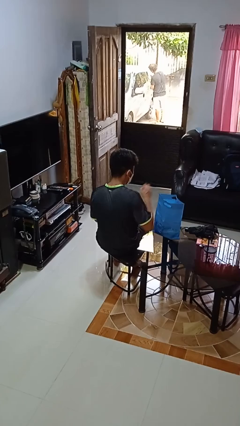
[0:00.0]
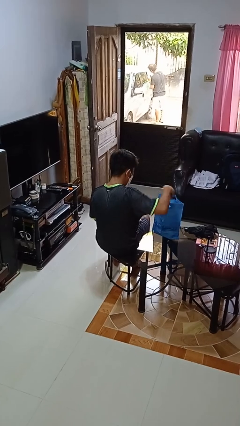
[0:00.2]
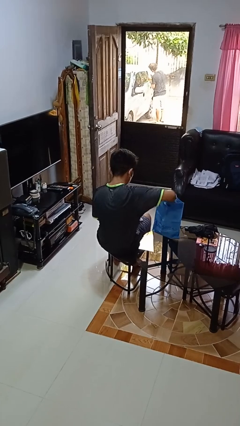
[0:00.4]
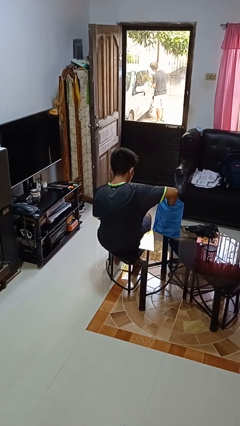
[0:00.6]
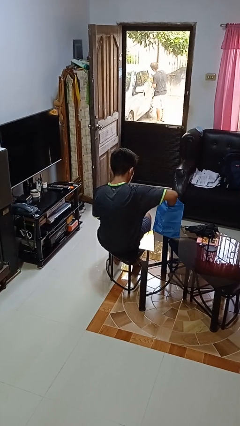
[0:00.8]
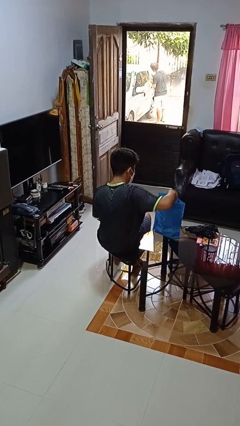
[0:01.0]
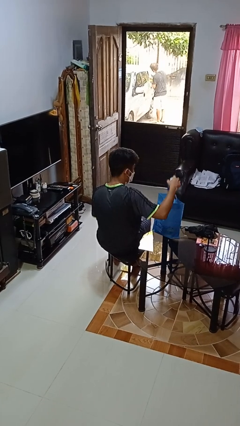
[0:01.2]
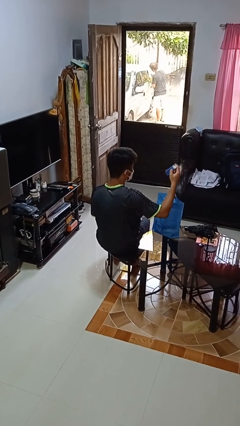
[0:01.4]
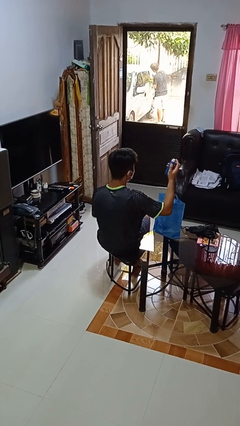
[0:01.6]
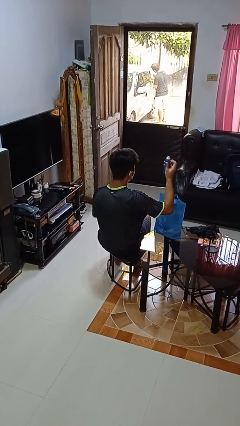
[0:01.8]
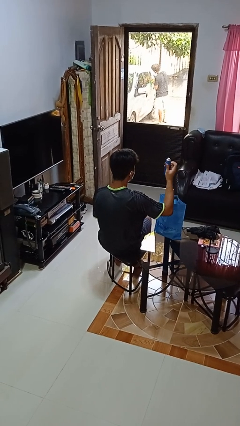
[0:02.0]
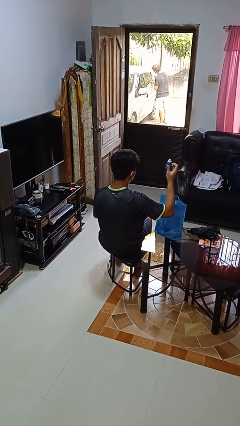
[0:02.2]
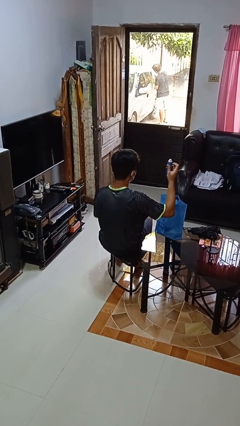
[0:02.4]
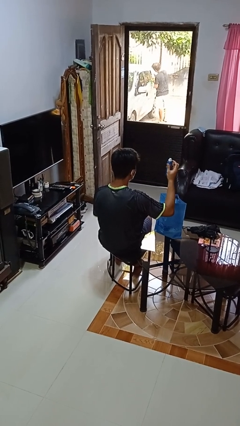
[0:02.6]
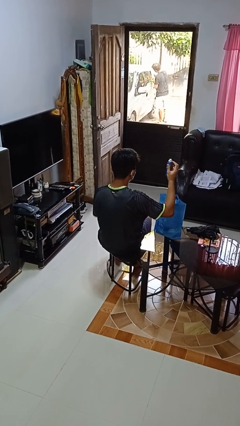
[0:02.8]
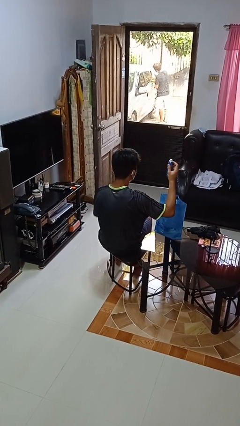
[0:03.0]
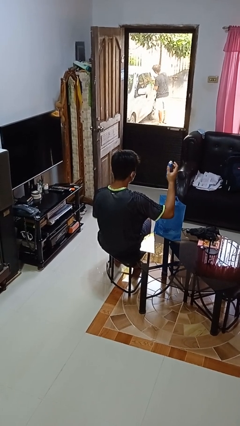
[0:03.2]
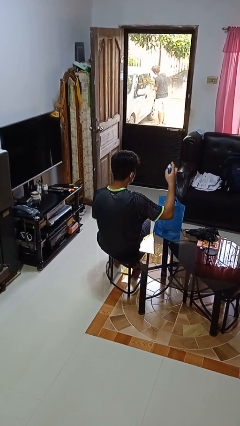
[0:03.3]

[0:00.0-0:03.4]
person takes object from bag

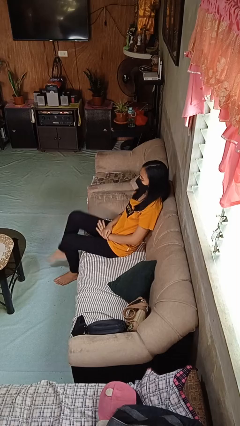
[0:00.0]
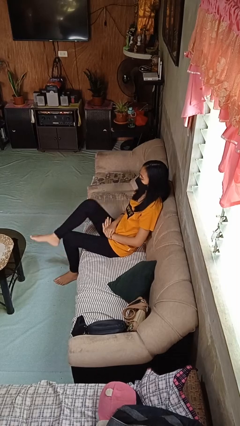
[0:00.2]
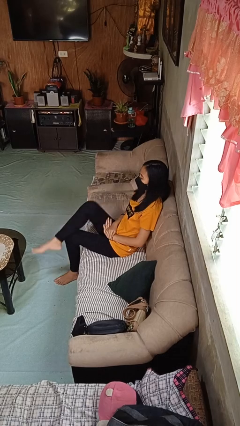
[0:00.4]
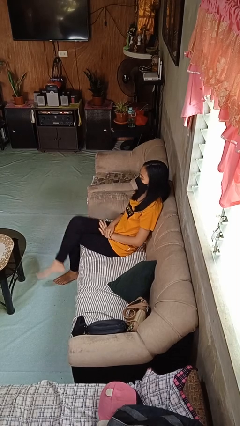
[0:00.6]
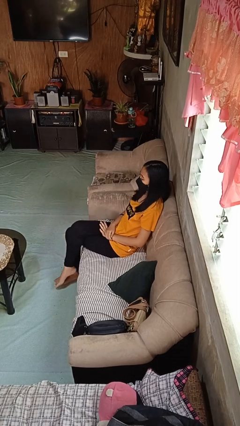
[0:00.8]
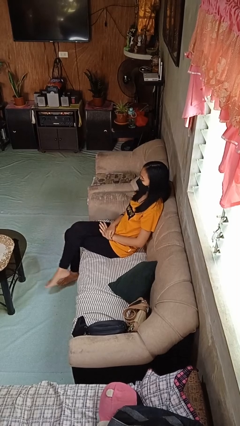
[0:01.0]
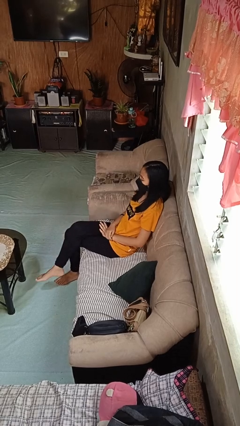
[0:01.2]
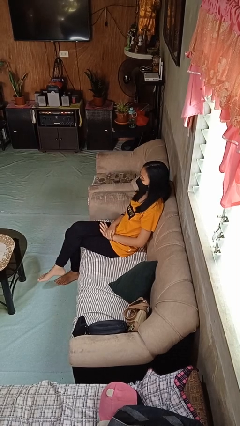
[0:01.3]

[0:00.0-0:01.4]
person crosses legs

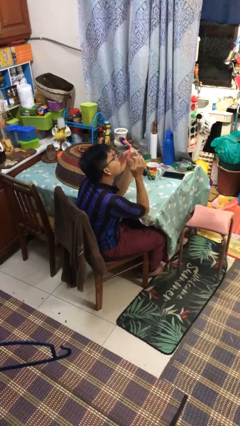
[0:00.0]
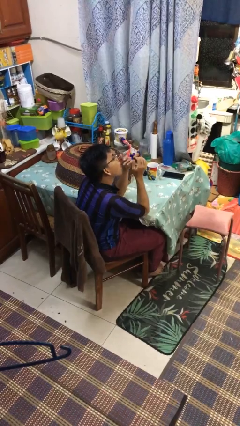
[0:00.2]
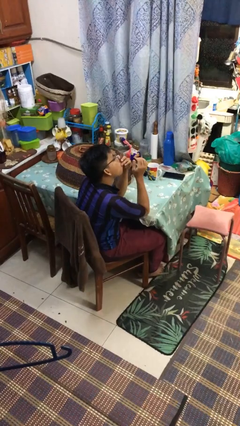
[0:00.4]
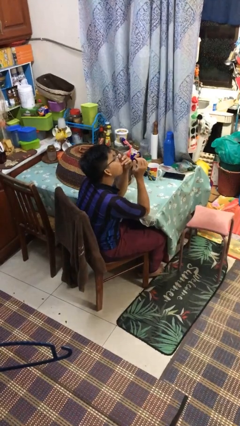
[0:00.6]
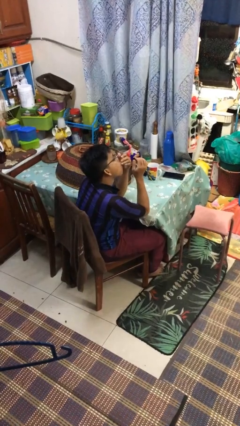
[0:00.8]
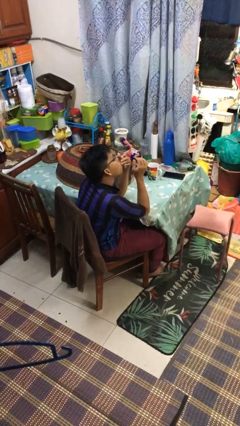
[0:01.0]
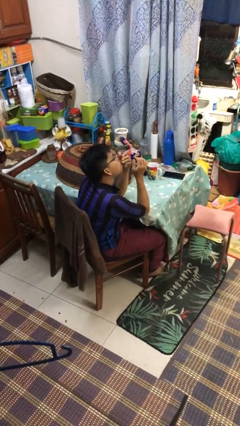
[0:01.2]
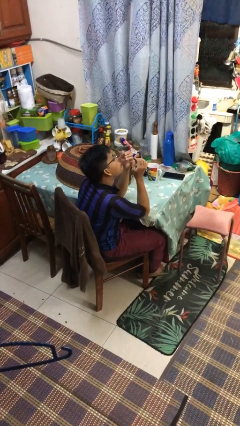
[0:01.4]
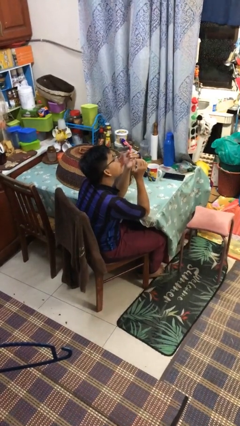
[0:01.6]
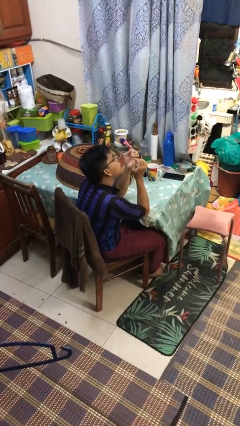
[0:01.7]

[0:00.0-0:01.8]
person licks fingers

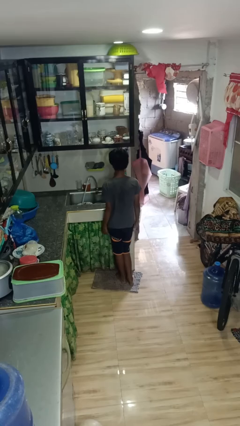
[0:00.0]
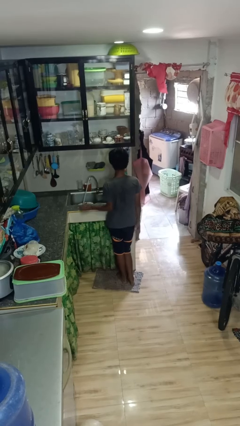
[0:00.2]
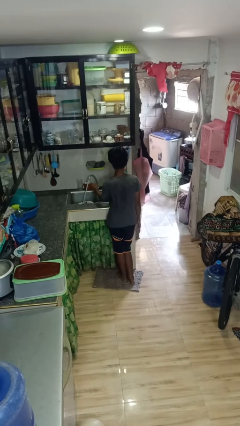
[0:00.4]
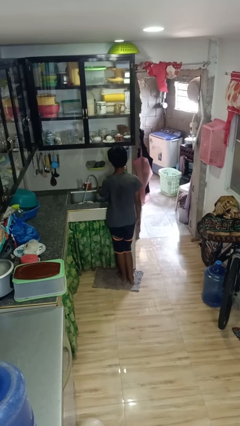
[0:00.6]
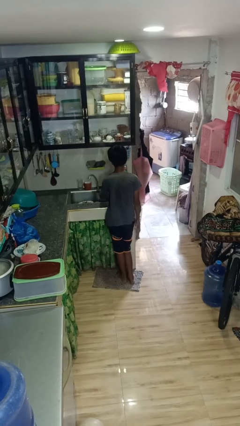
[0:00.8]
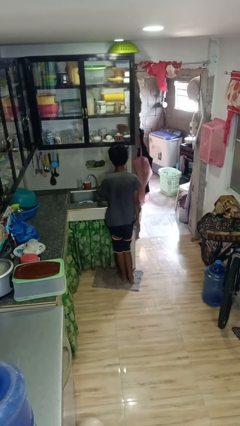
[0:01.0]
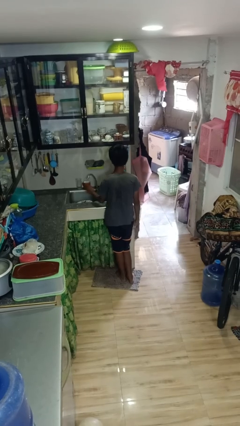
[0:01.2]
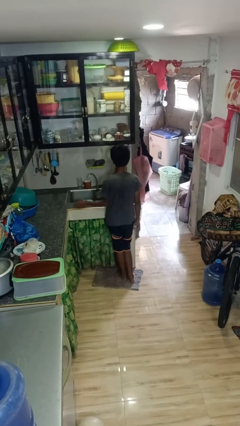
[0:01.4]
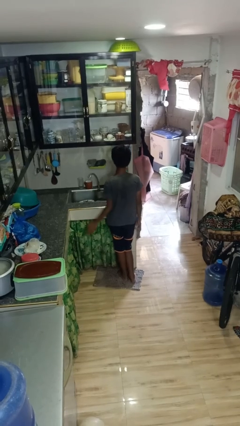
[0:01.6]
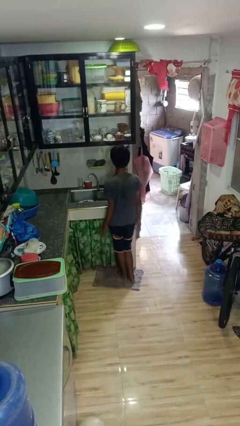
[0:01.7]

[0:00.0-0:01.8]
person turns off faucet

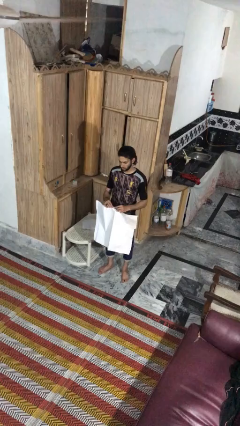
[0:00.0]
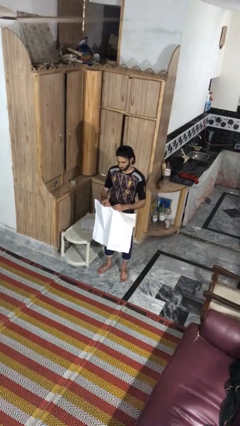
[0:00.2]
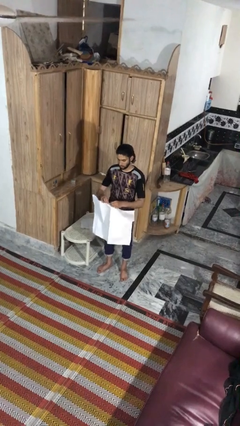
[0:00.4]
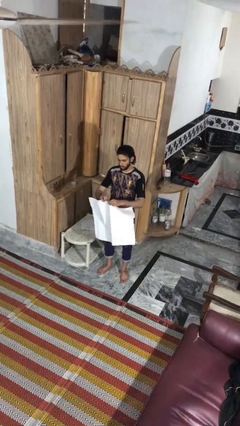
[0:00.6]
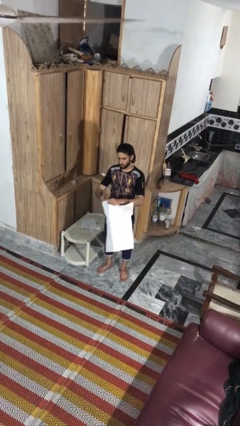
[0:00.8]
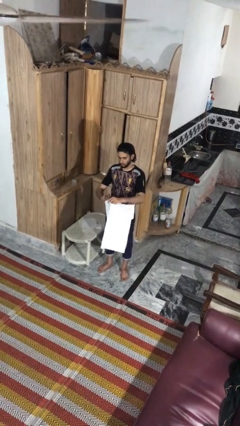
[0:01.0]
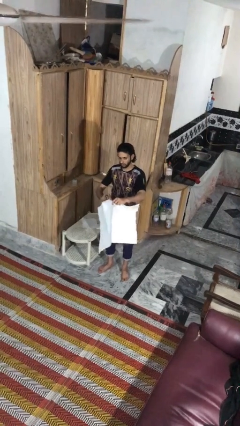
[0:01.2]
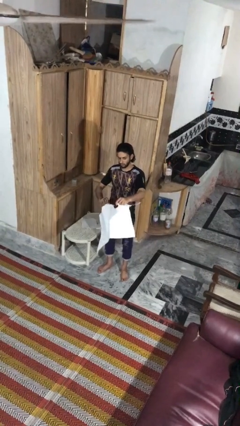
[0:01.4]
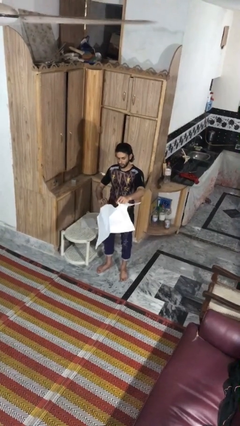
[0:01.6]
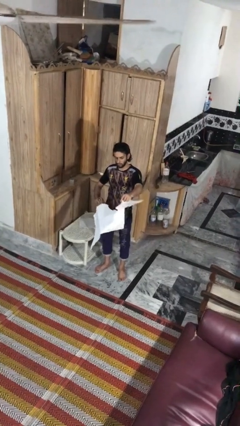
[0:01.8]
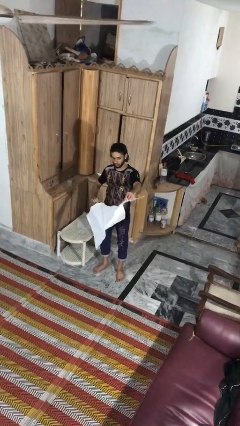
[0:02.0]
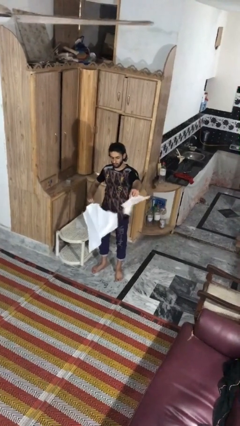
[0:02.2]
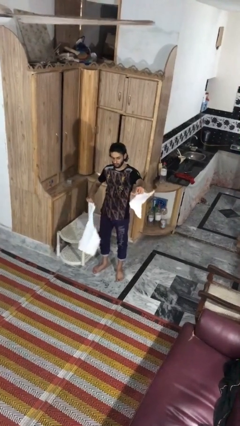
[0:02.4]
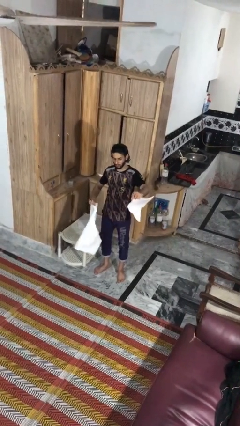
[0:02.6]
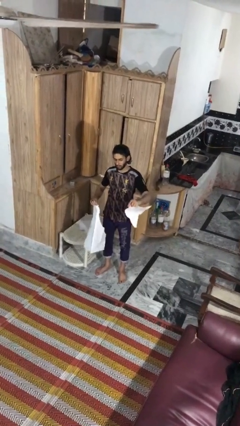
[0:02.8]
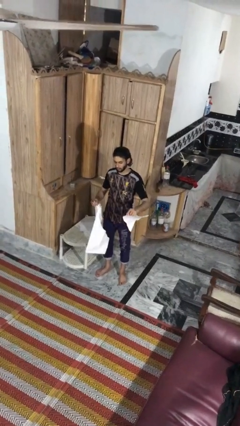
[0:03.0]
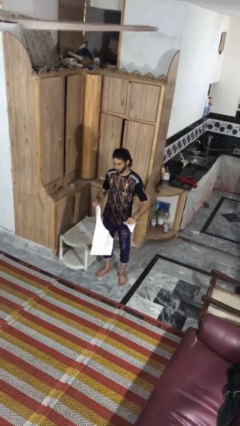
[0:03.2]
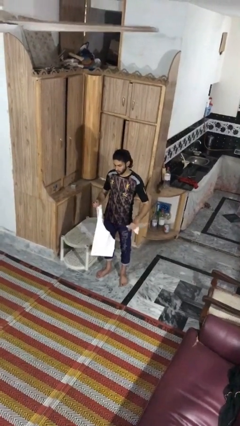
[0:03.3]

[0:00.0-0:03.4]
person tears paper

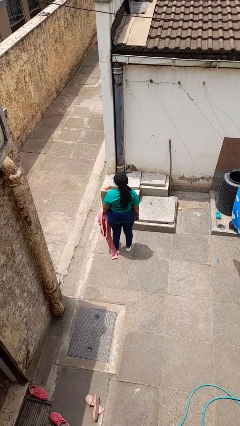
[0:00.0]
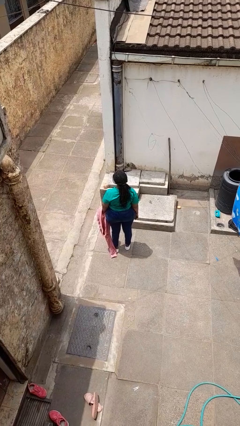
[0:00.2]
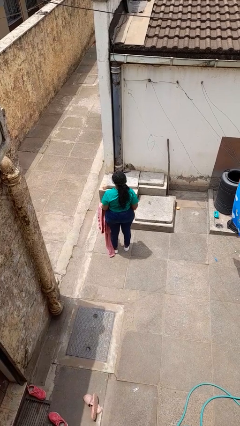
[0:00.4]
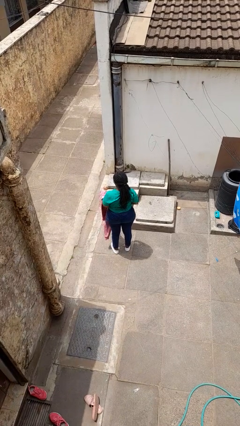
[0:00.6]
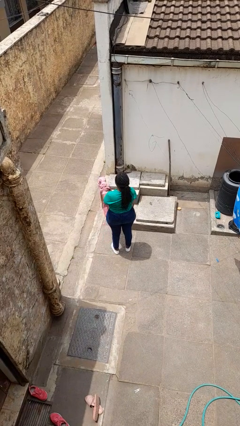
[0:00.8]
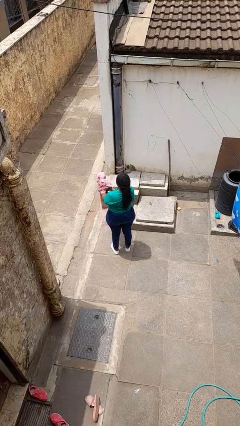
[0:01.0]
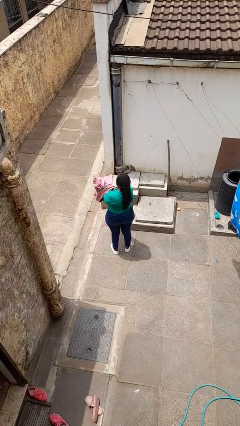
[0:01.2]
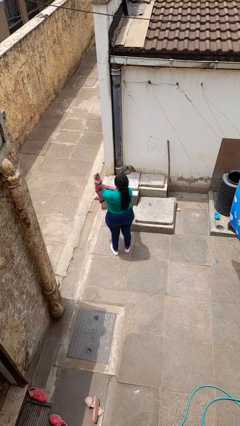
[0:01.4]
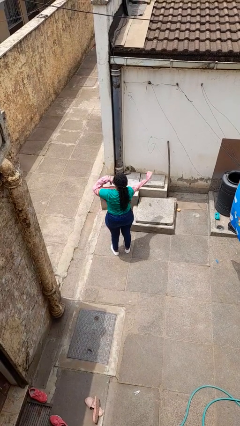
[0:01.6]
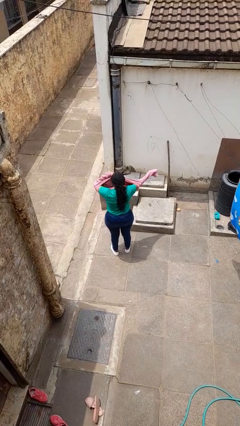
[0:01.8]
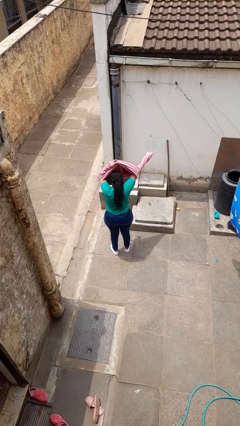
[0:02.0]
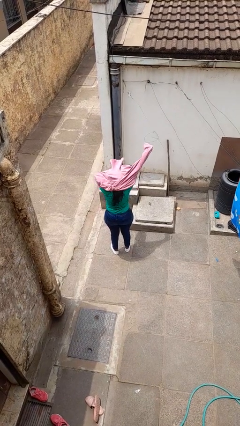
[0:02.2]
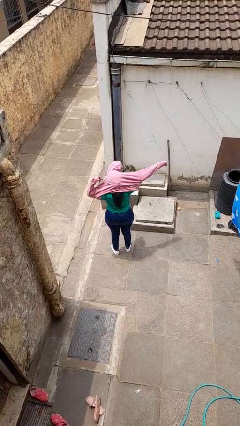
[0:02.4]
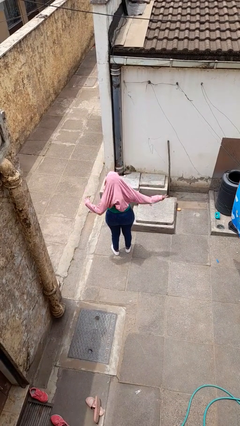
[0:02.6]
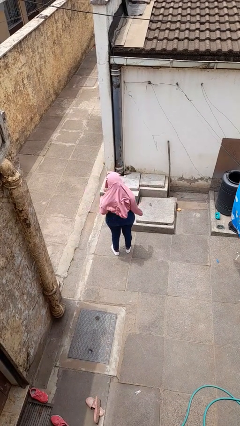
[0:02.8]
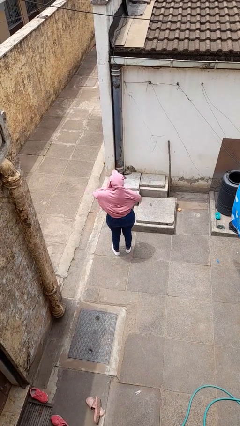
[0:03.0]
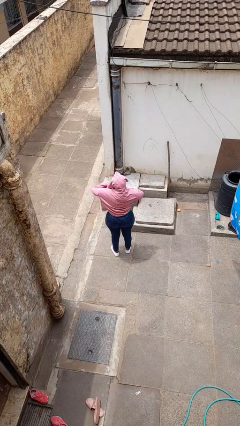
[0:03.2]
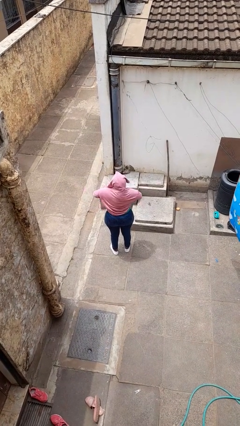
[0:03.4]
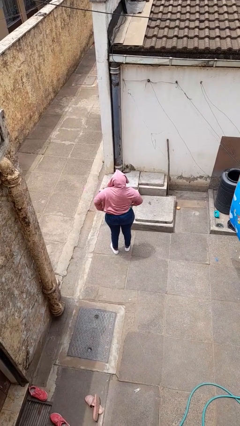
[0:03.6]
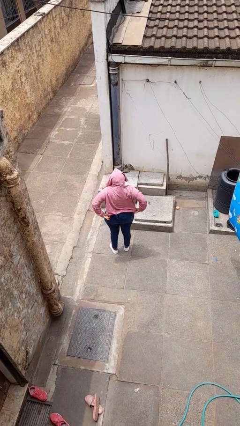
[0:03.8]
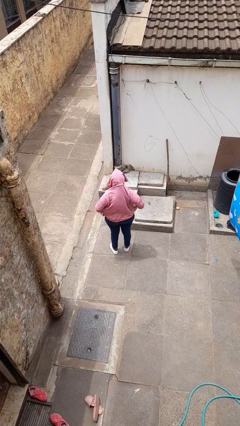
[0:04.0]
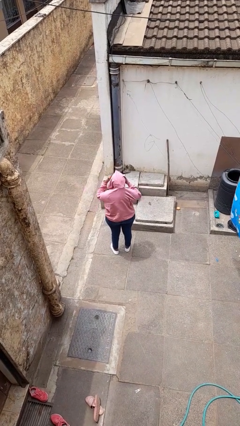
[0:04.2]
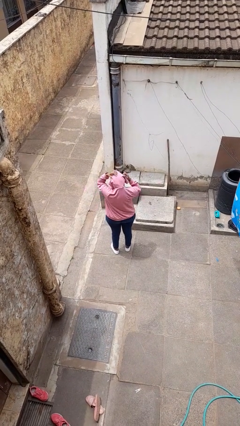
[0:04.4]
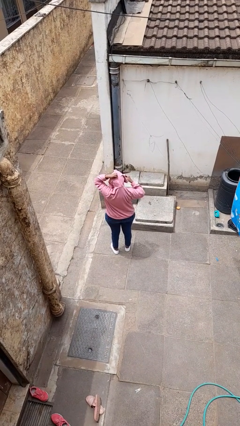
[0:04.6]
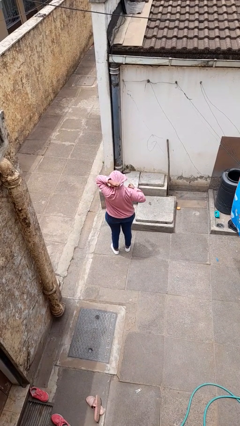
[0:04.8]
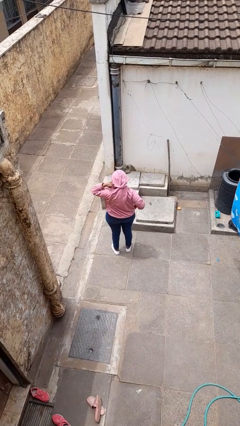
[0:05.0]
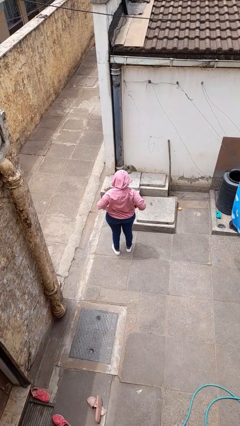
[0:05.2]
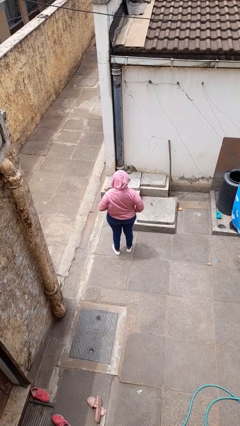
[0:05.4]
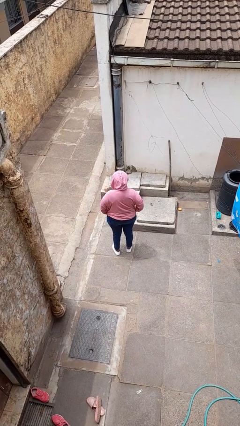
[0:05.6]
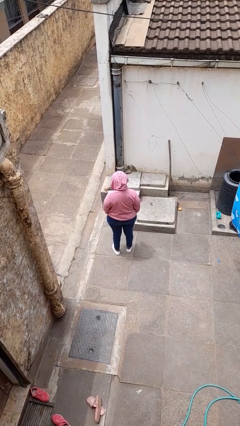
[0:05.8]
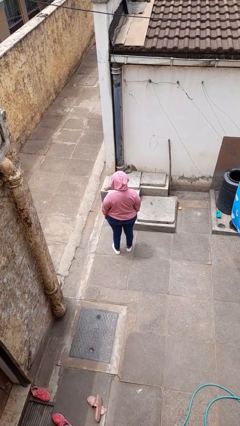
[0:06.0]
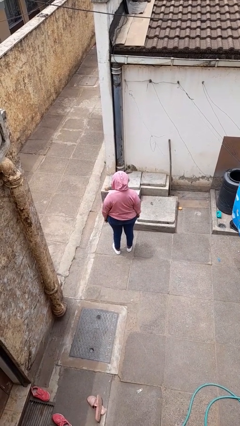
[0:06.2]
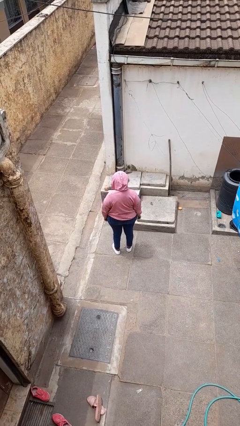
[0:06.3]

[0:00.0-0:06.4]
person puts on hoodie
